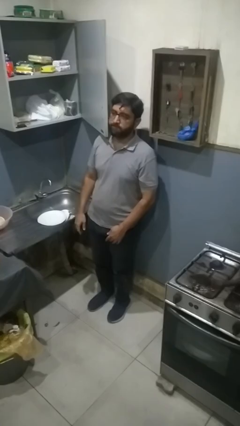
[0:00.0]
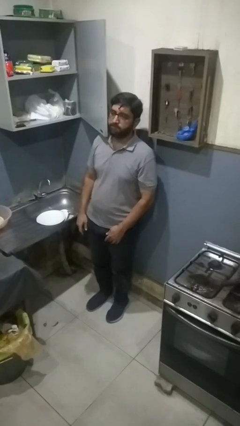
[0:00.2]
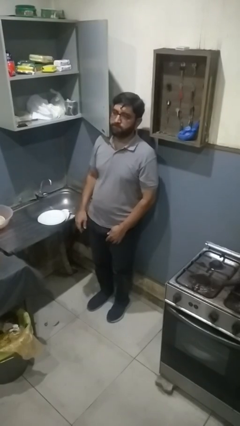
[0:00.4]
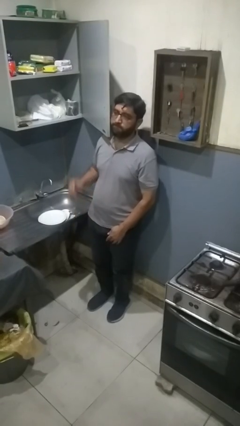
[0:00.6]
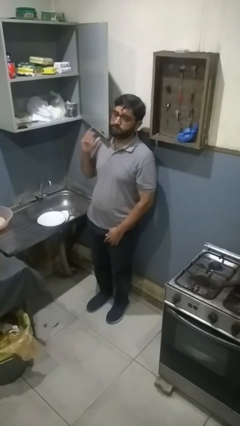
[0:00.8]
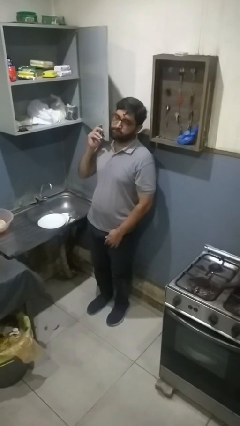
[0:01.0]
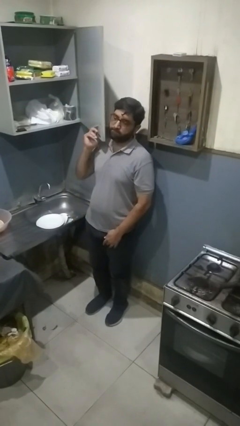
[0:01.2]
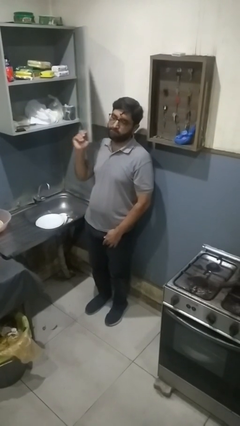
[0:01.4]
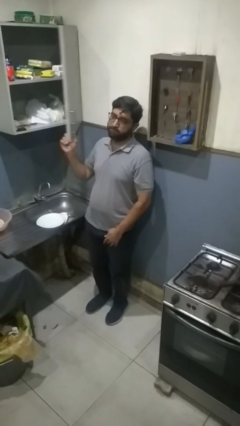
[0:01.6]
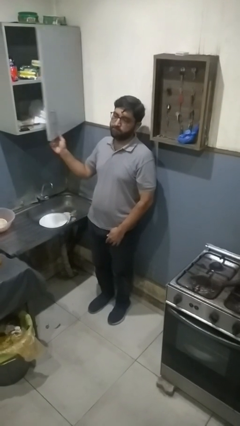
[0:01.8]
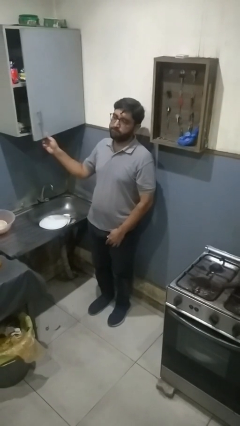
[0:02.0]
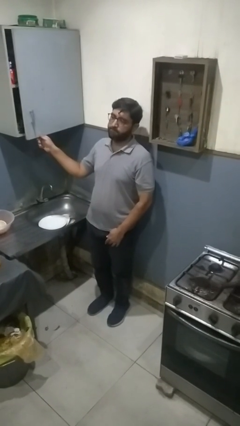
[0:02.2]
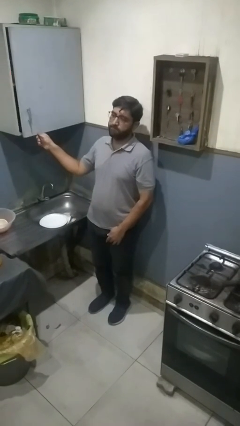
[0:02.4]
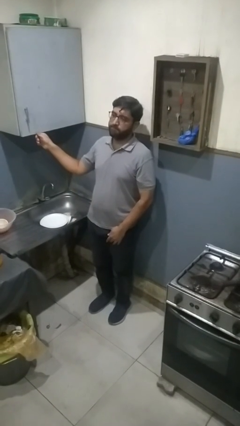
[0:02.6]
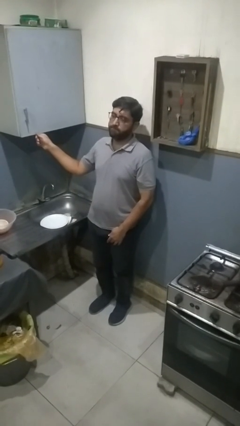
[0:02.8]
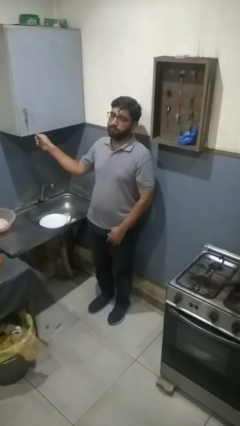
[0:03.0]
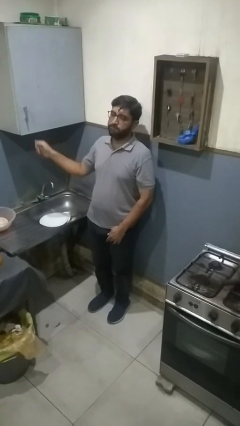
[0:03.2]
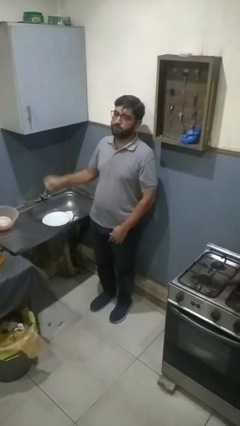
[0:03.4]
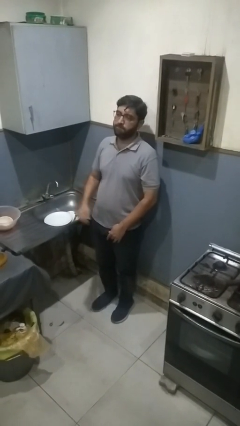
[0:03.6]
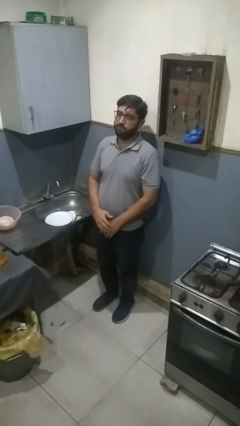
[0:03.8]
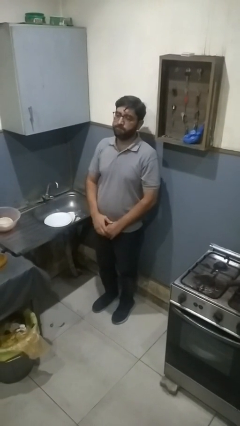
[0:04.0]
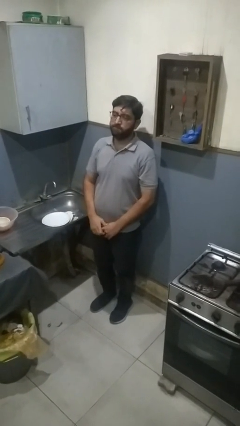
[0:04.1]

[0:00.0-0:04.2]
person closes cabinet

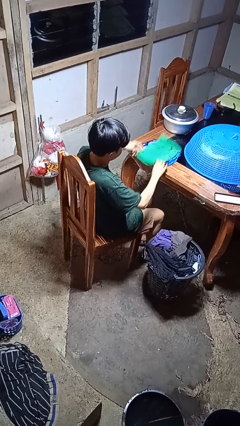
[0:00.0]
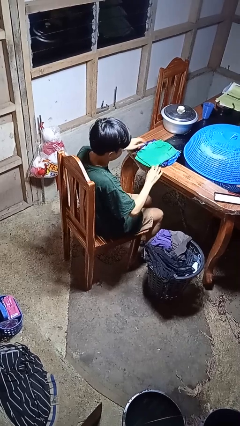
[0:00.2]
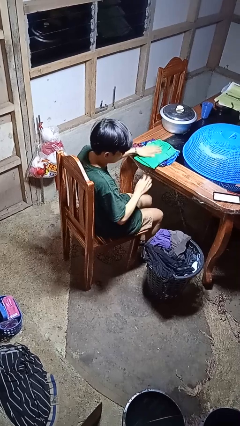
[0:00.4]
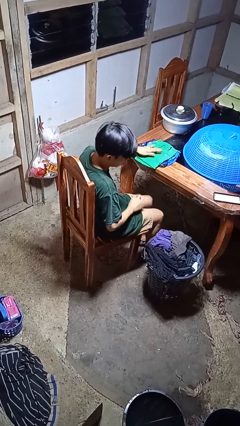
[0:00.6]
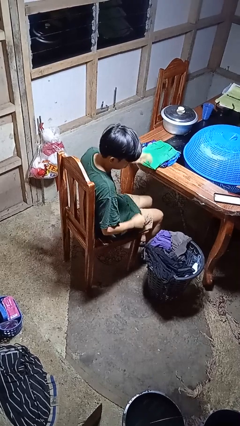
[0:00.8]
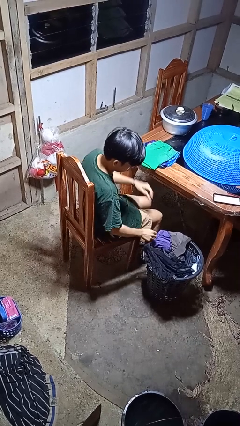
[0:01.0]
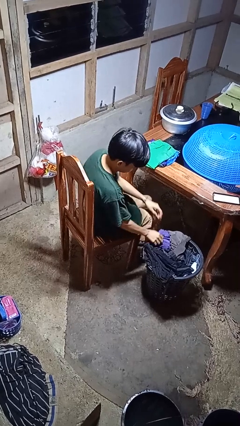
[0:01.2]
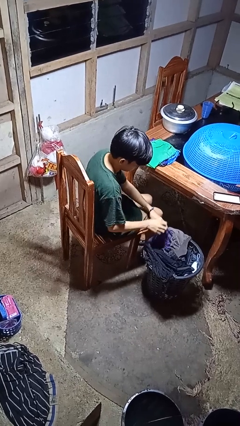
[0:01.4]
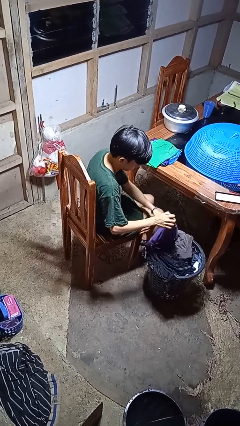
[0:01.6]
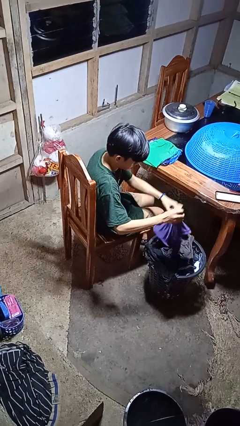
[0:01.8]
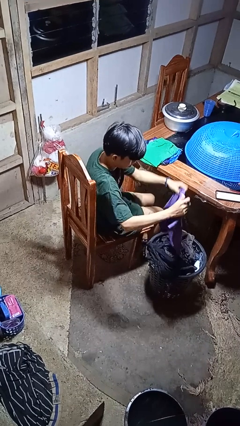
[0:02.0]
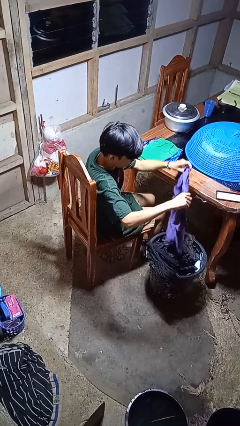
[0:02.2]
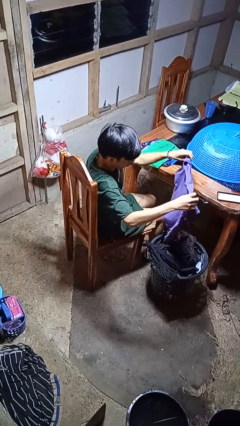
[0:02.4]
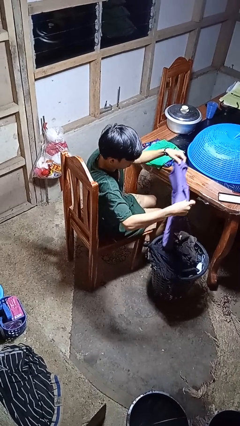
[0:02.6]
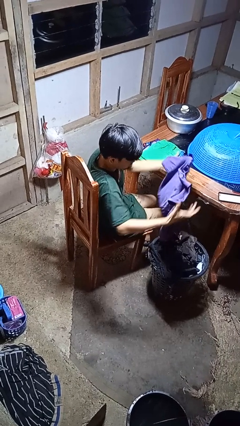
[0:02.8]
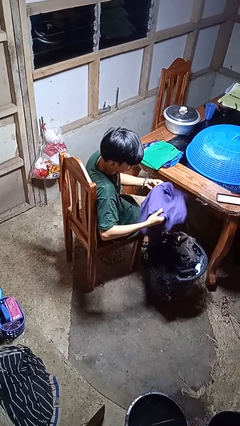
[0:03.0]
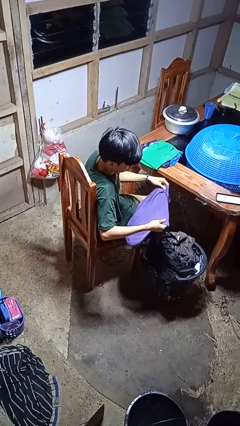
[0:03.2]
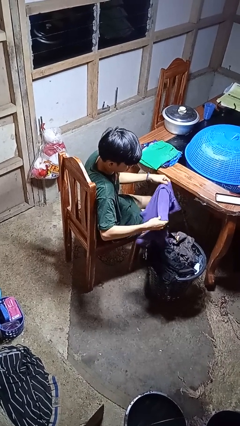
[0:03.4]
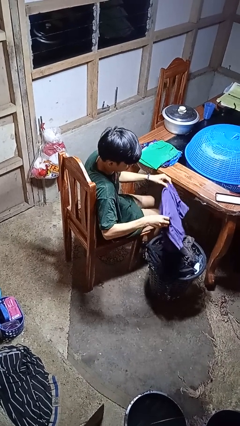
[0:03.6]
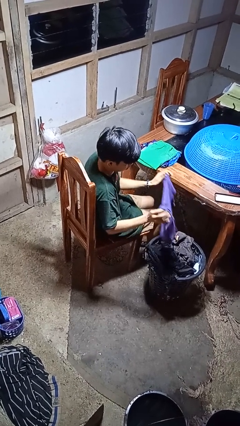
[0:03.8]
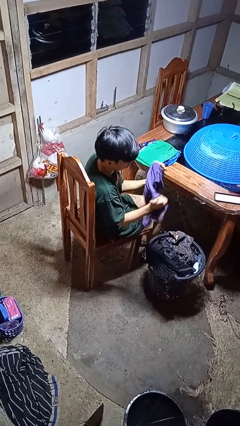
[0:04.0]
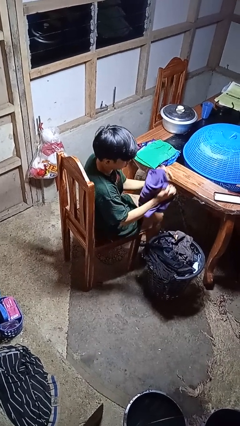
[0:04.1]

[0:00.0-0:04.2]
person folds shirt

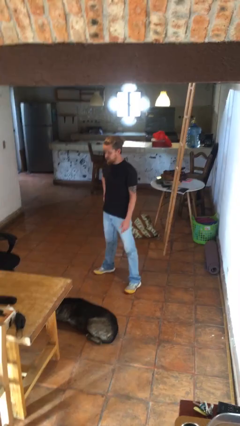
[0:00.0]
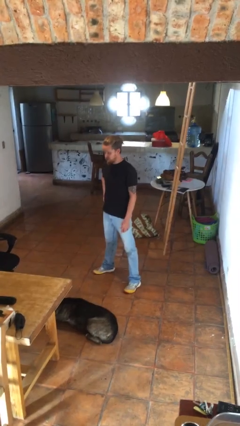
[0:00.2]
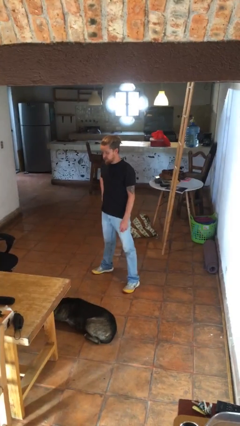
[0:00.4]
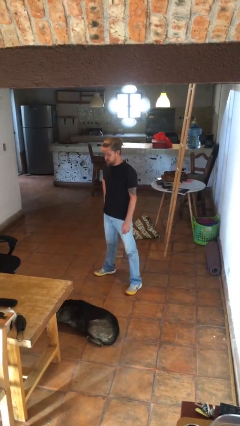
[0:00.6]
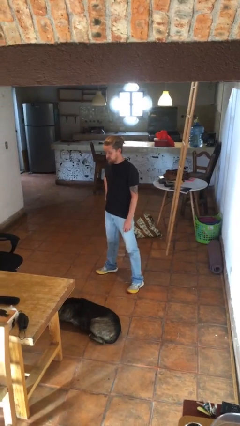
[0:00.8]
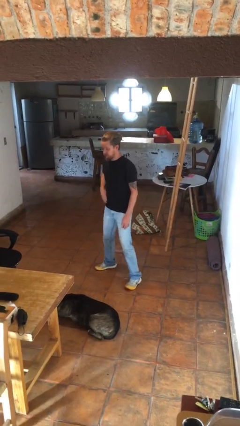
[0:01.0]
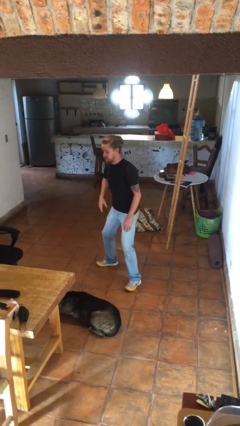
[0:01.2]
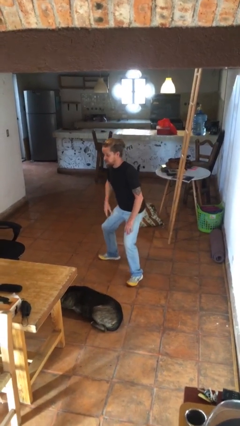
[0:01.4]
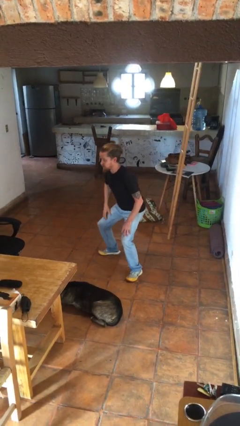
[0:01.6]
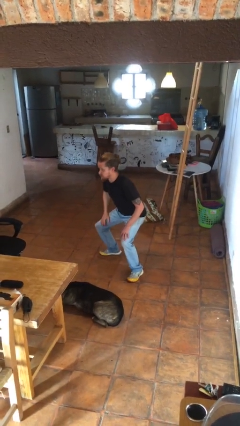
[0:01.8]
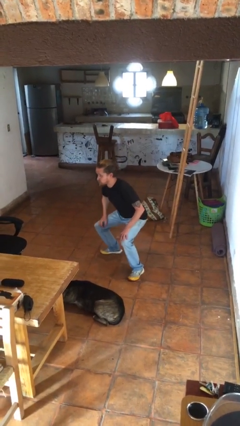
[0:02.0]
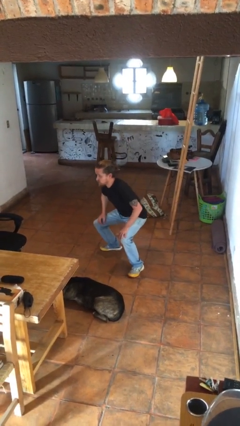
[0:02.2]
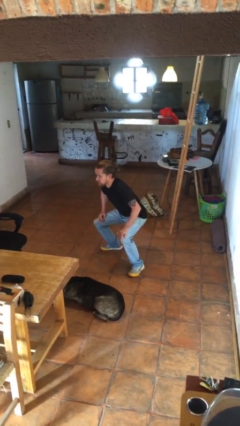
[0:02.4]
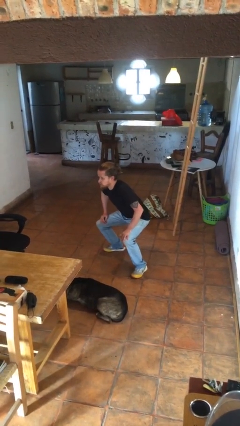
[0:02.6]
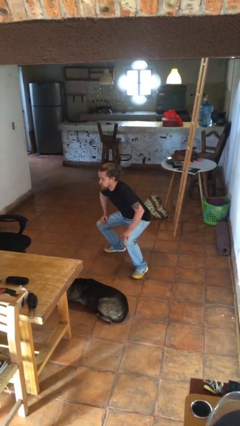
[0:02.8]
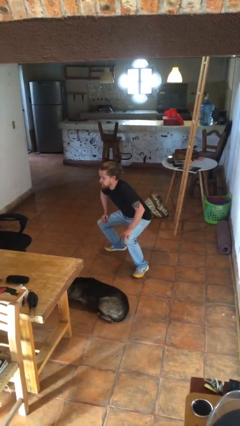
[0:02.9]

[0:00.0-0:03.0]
person squats

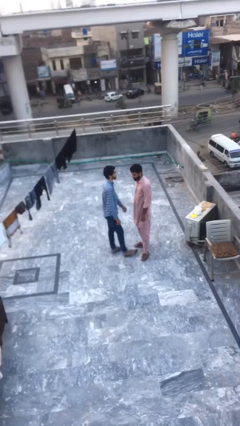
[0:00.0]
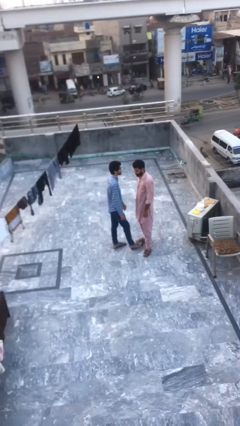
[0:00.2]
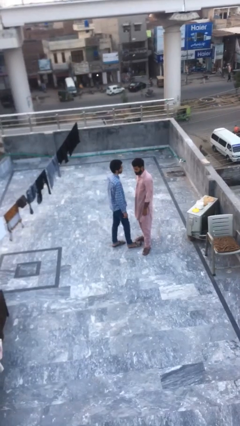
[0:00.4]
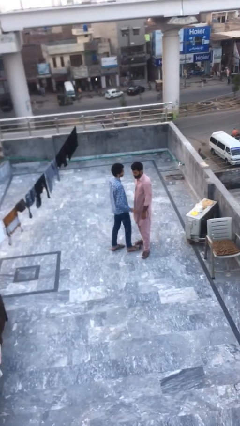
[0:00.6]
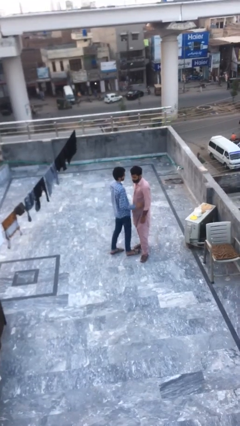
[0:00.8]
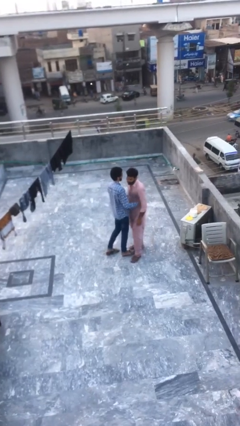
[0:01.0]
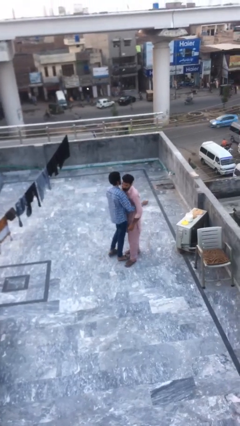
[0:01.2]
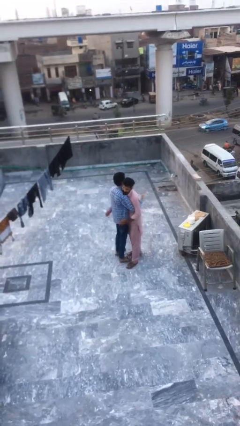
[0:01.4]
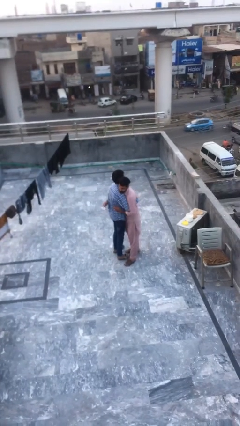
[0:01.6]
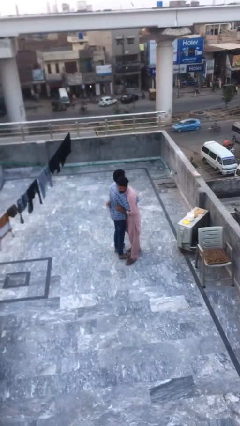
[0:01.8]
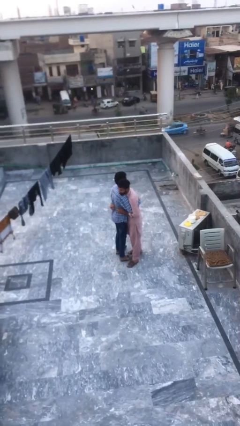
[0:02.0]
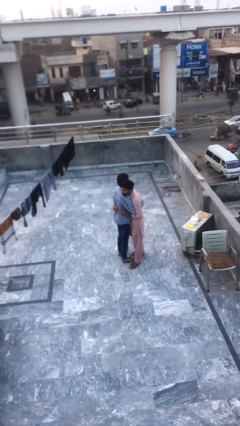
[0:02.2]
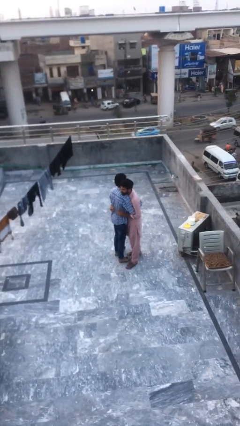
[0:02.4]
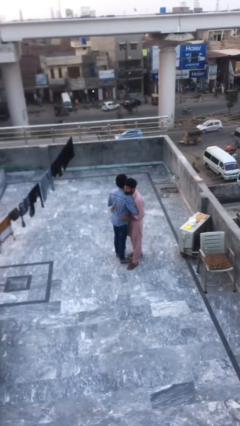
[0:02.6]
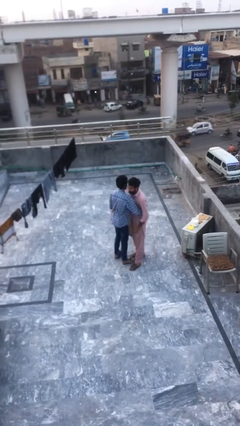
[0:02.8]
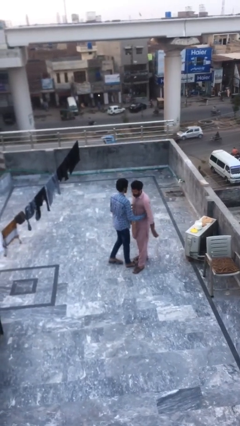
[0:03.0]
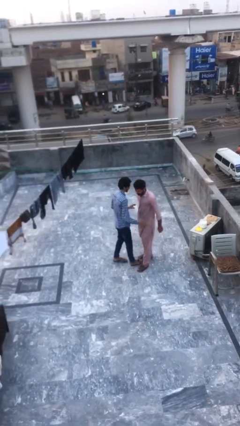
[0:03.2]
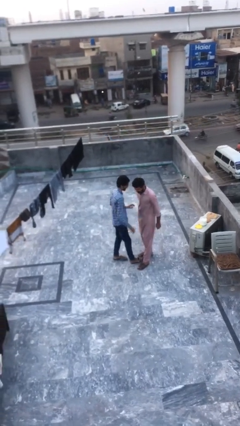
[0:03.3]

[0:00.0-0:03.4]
person embraces person

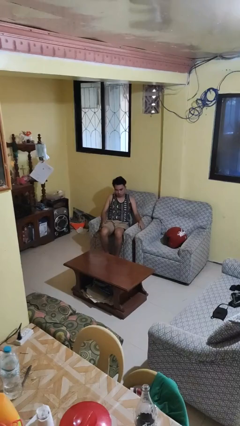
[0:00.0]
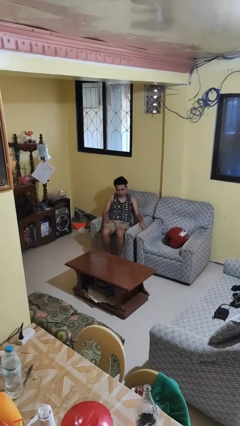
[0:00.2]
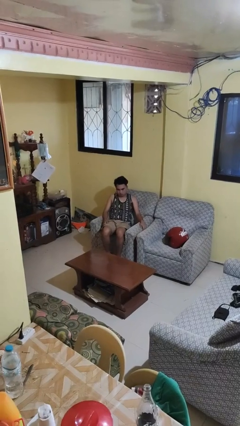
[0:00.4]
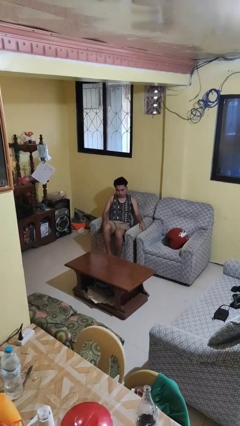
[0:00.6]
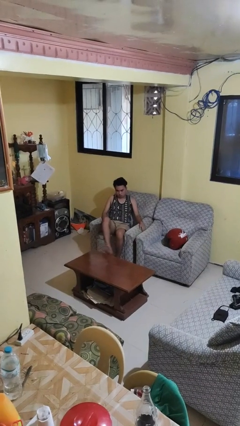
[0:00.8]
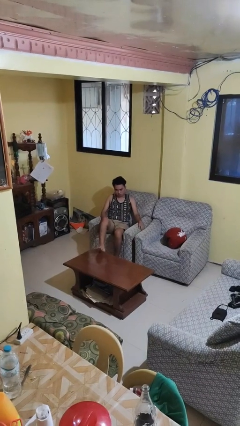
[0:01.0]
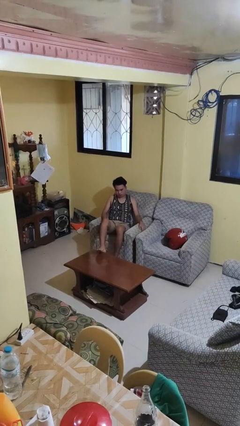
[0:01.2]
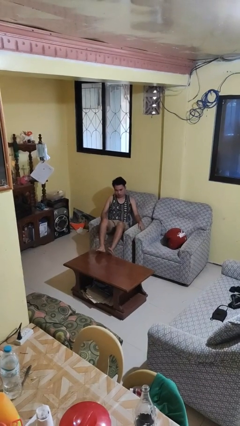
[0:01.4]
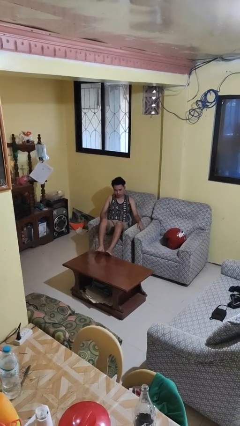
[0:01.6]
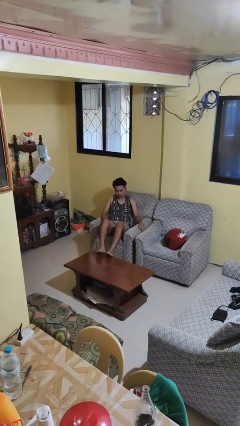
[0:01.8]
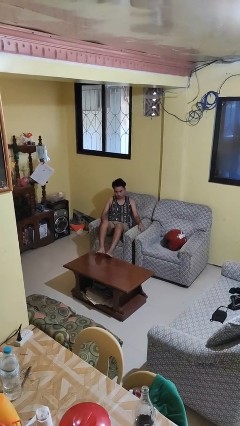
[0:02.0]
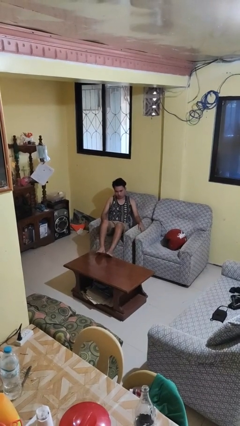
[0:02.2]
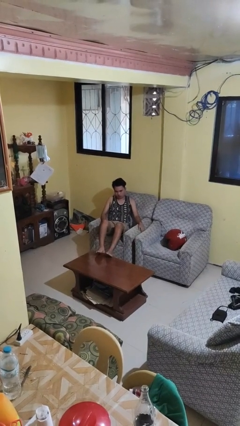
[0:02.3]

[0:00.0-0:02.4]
person puts feet up
